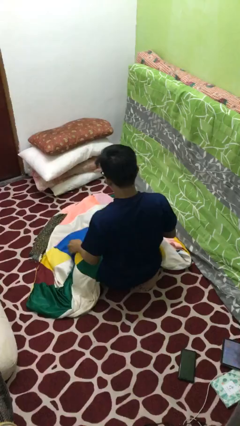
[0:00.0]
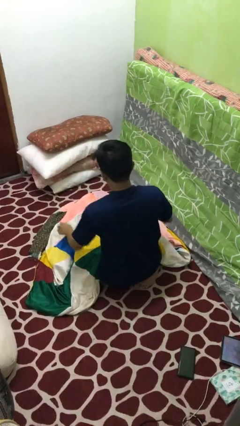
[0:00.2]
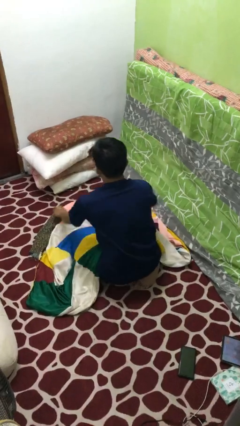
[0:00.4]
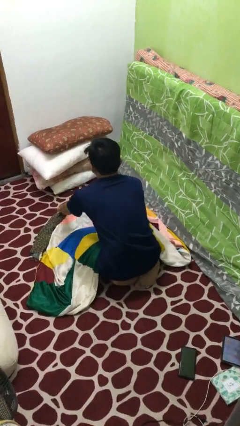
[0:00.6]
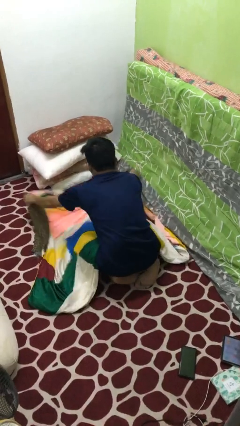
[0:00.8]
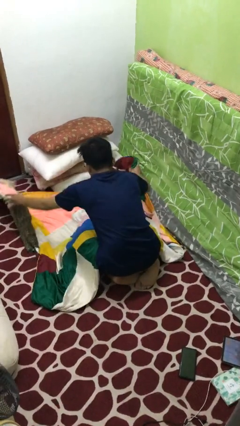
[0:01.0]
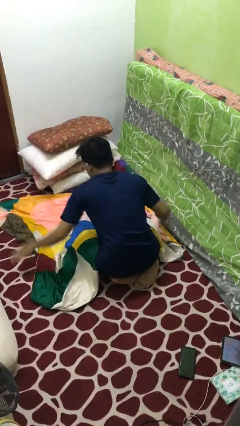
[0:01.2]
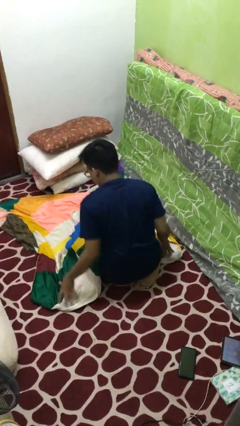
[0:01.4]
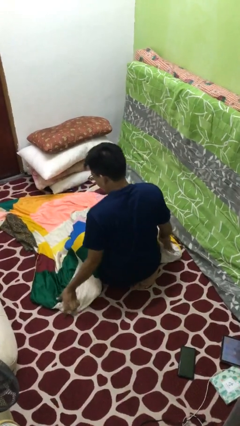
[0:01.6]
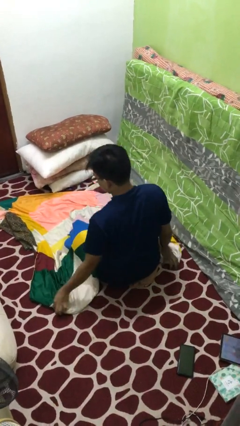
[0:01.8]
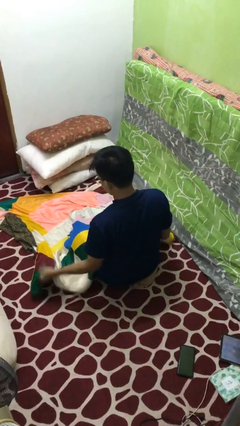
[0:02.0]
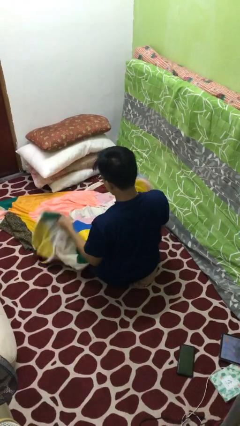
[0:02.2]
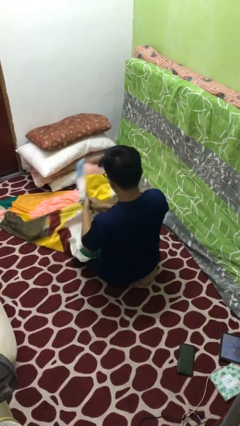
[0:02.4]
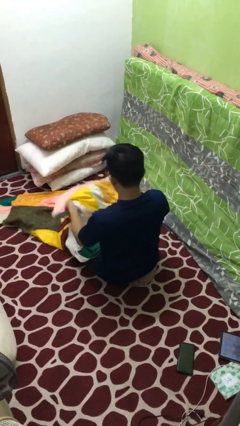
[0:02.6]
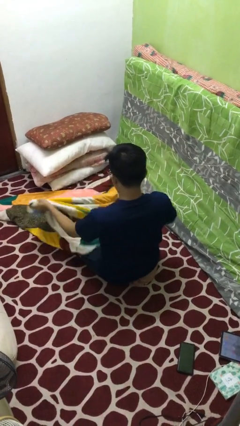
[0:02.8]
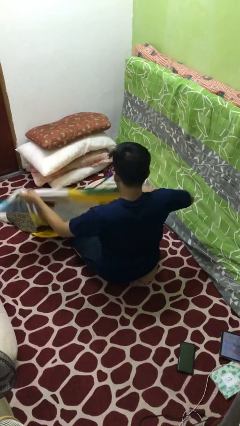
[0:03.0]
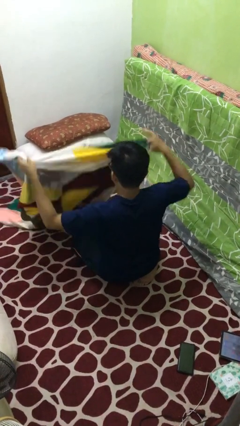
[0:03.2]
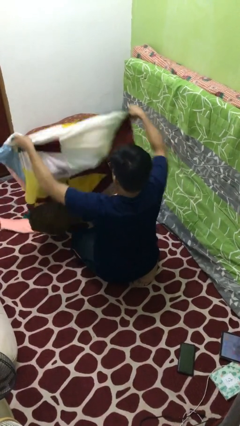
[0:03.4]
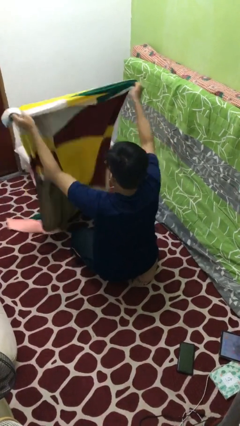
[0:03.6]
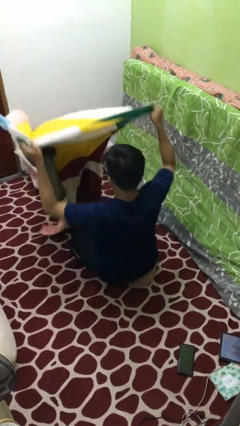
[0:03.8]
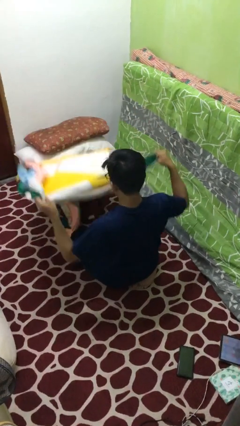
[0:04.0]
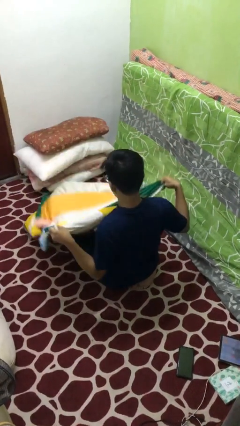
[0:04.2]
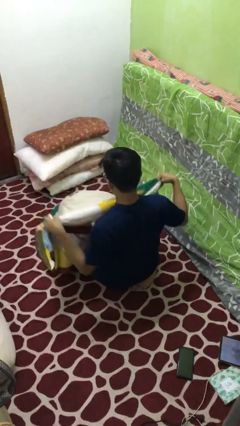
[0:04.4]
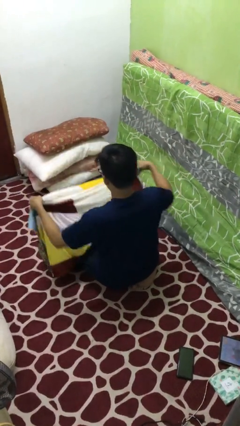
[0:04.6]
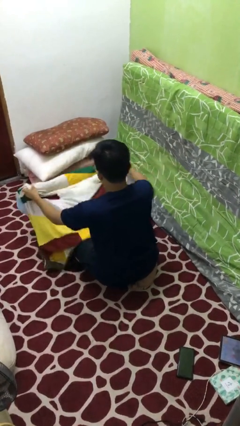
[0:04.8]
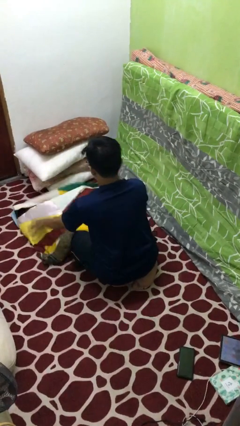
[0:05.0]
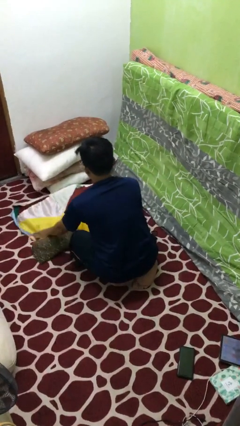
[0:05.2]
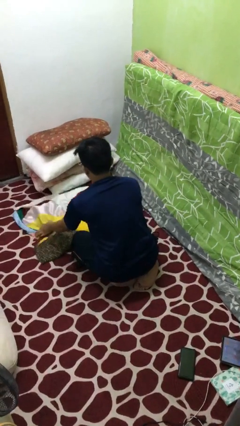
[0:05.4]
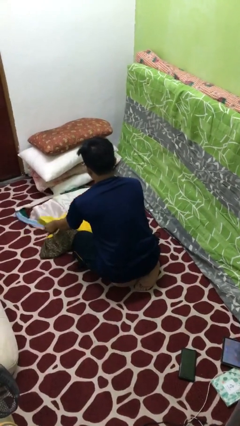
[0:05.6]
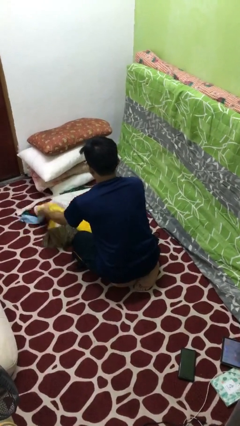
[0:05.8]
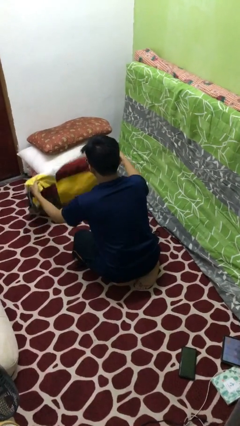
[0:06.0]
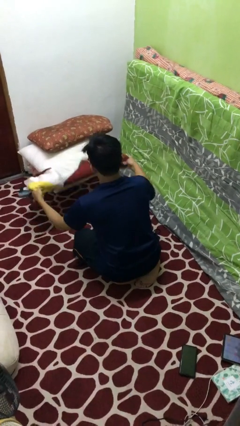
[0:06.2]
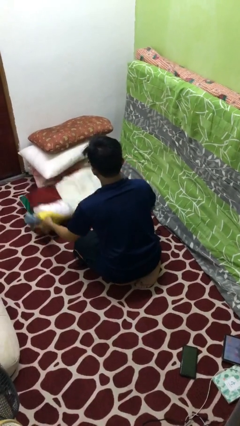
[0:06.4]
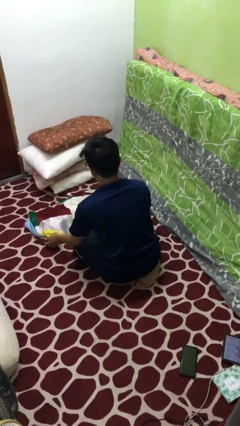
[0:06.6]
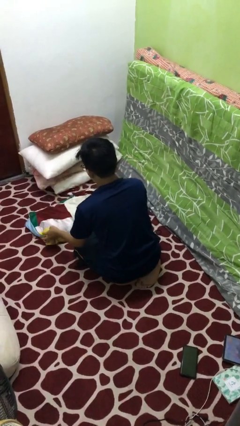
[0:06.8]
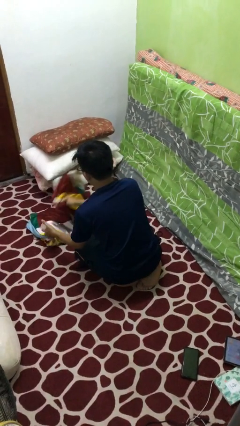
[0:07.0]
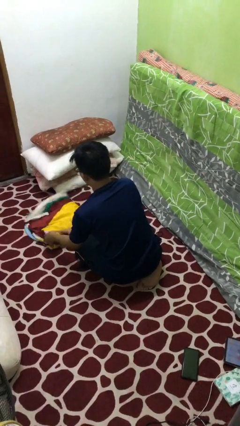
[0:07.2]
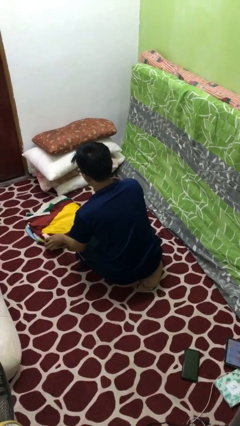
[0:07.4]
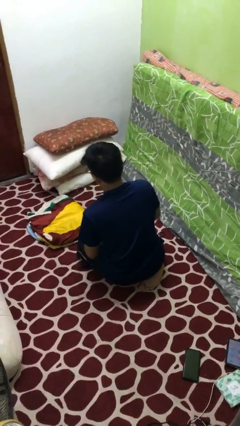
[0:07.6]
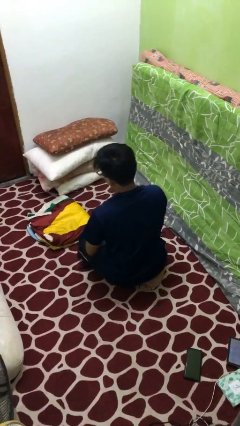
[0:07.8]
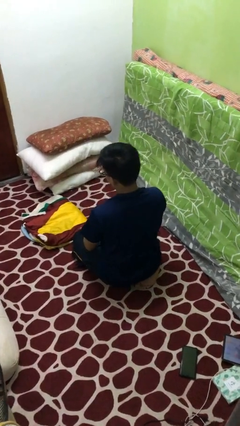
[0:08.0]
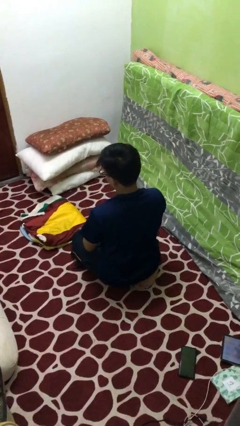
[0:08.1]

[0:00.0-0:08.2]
person folds blanket

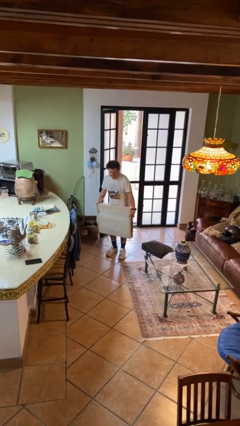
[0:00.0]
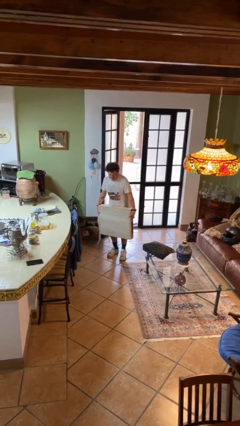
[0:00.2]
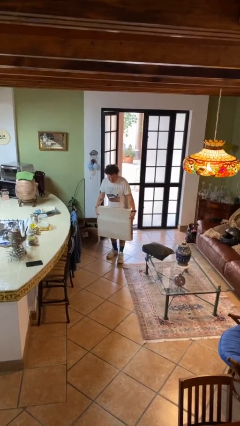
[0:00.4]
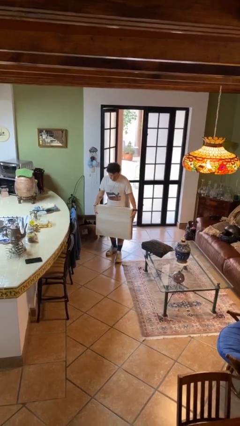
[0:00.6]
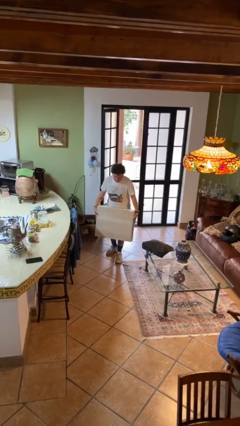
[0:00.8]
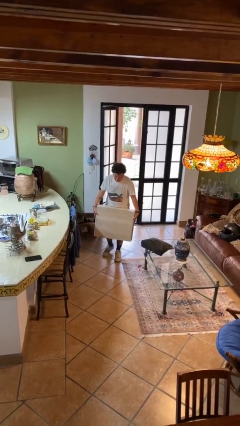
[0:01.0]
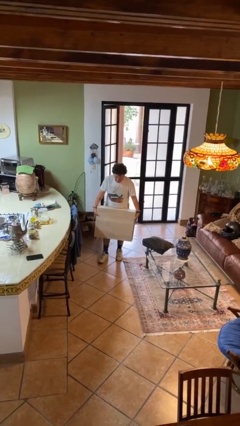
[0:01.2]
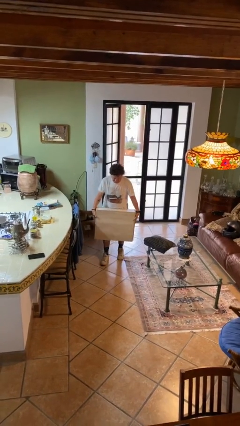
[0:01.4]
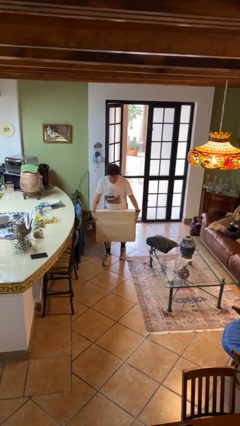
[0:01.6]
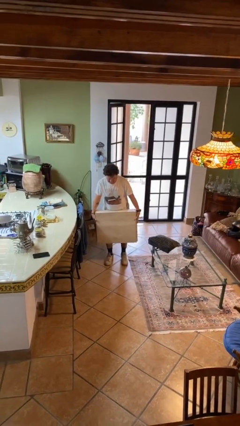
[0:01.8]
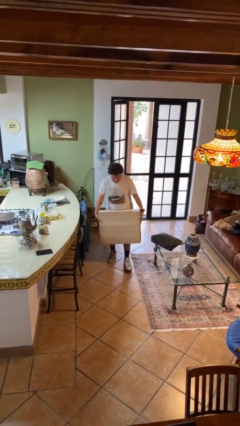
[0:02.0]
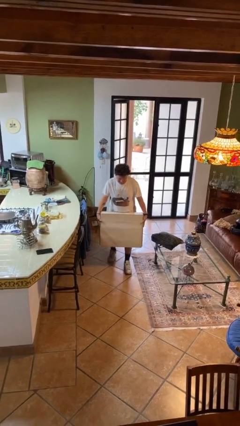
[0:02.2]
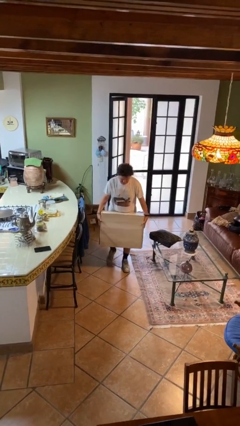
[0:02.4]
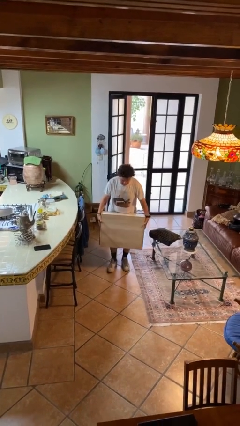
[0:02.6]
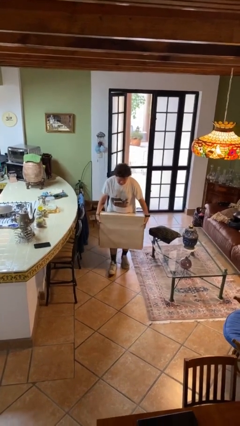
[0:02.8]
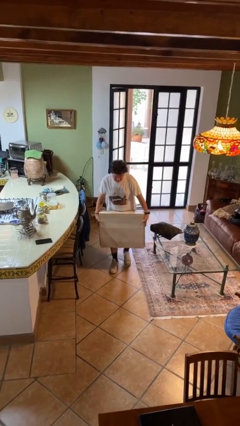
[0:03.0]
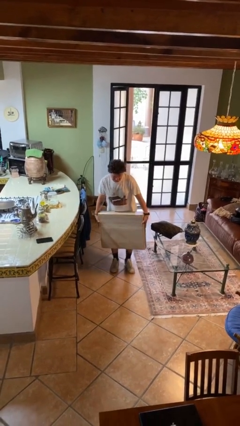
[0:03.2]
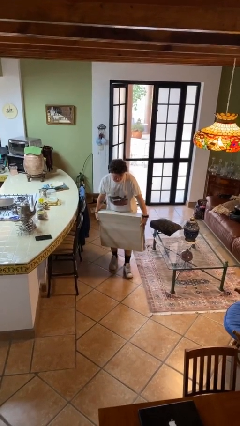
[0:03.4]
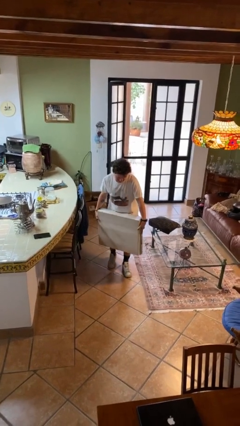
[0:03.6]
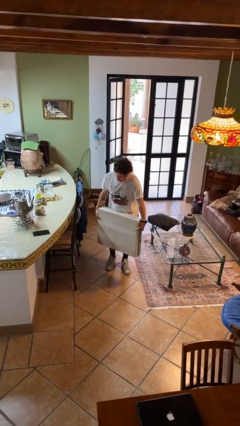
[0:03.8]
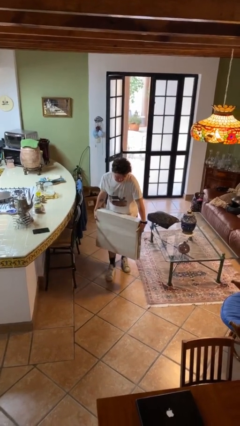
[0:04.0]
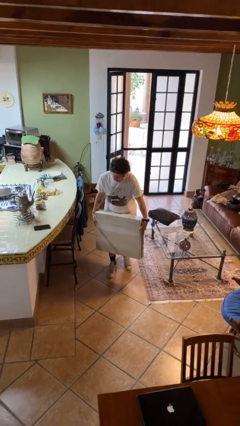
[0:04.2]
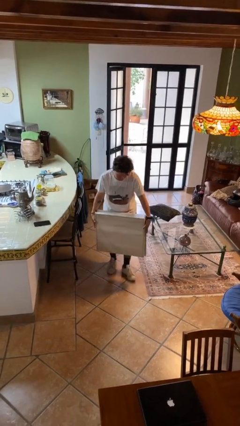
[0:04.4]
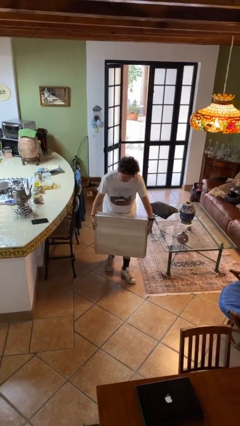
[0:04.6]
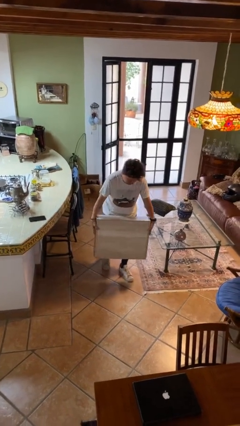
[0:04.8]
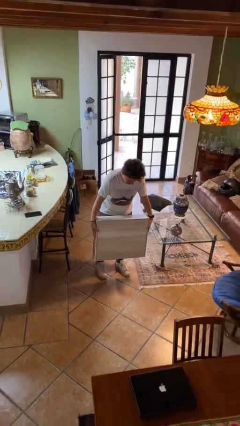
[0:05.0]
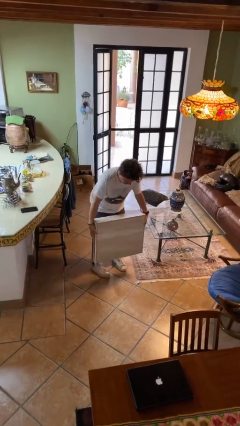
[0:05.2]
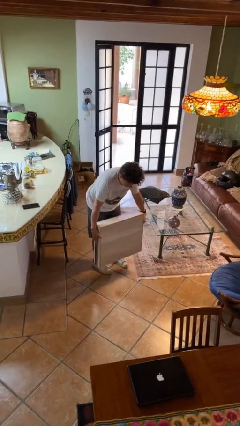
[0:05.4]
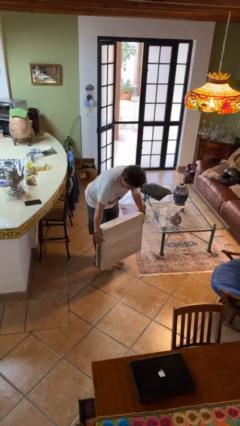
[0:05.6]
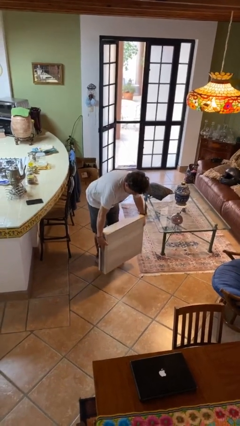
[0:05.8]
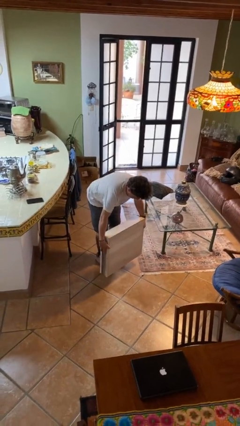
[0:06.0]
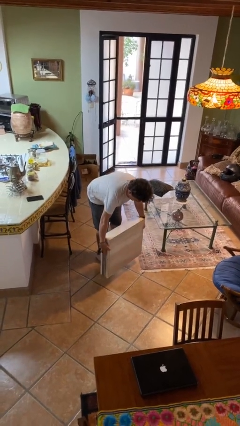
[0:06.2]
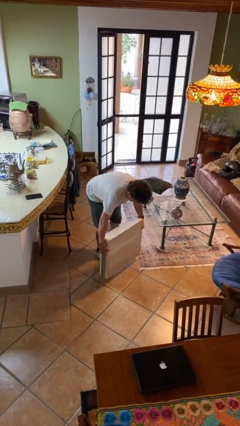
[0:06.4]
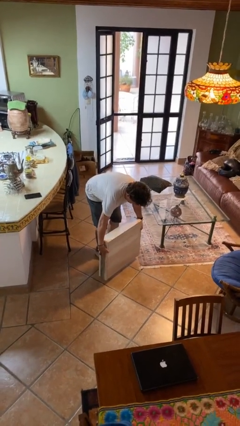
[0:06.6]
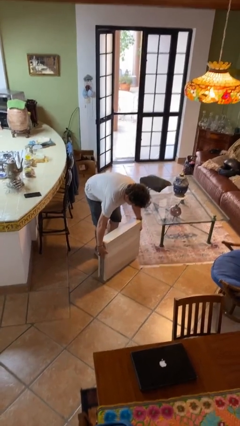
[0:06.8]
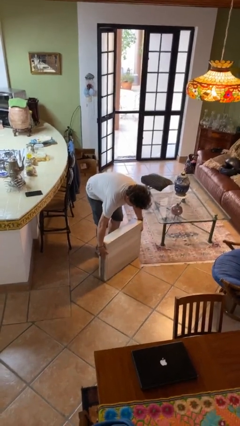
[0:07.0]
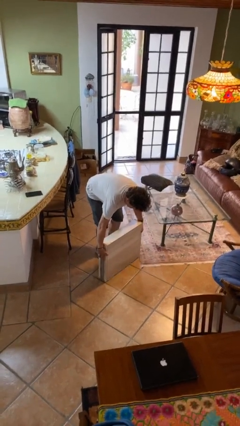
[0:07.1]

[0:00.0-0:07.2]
person carries heavy object

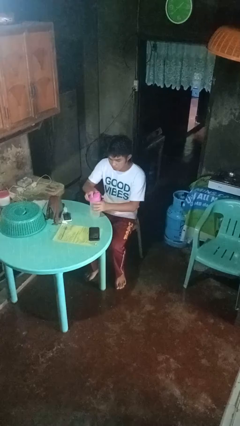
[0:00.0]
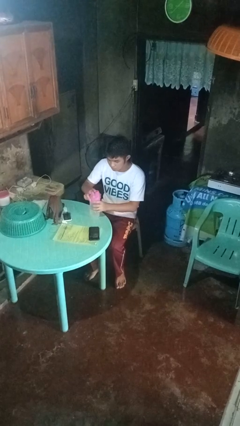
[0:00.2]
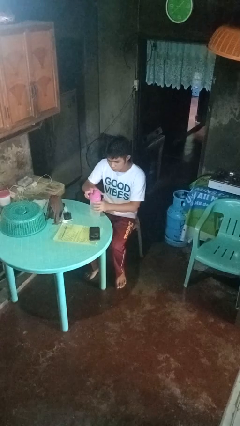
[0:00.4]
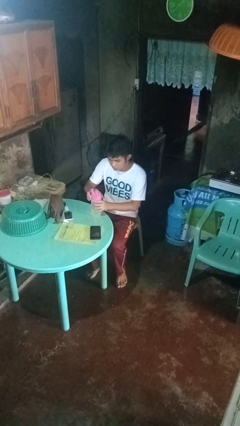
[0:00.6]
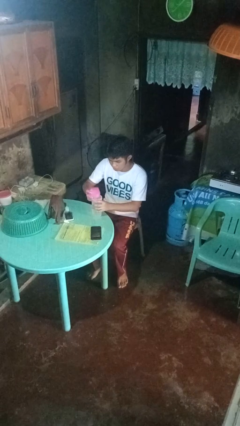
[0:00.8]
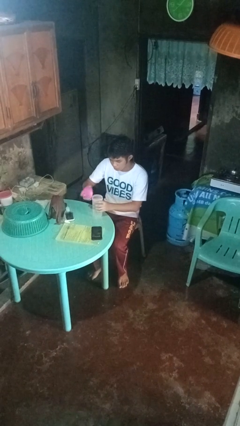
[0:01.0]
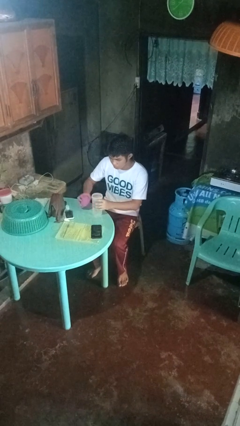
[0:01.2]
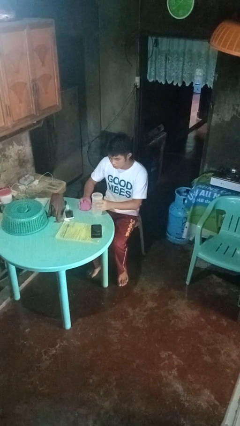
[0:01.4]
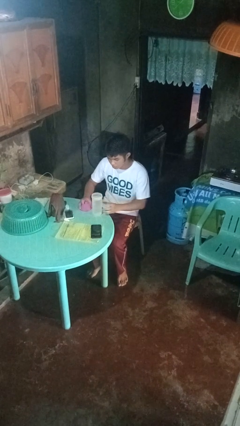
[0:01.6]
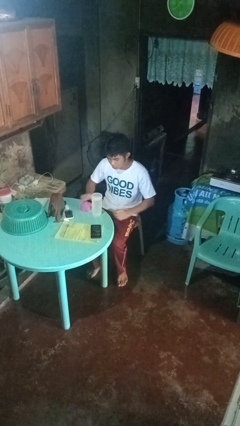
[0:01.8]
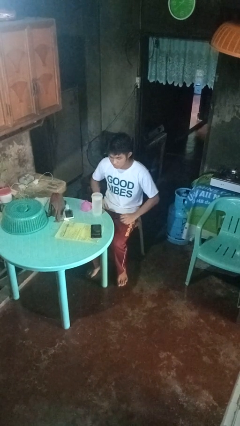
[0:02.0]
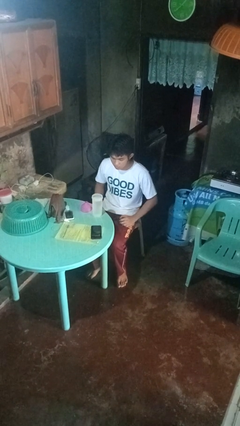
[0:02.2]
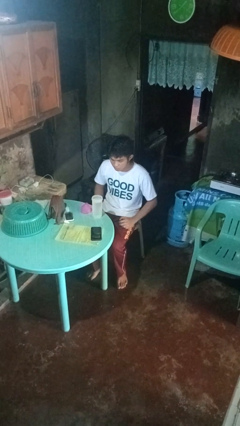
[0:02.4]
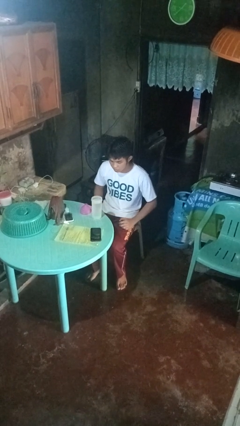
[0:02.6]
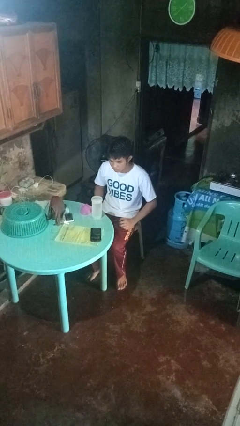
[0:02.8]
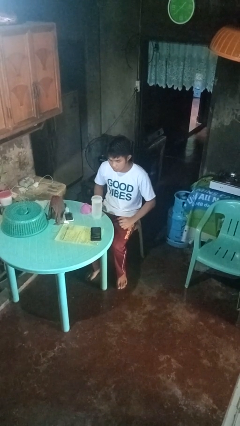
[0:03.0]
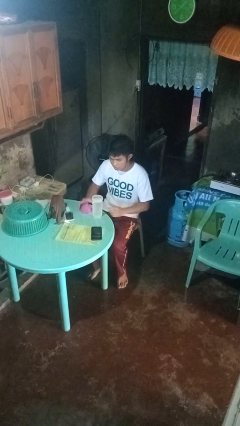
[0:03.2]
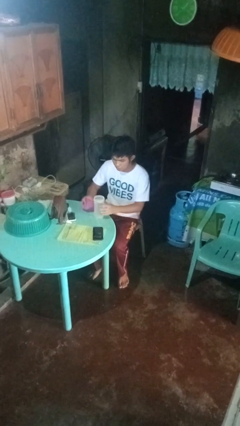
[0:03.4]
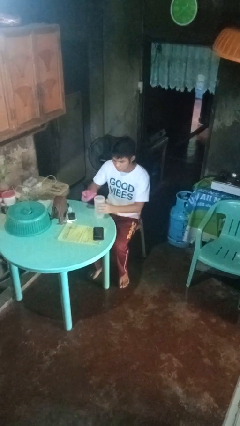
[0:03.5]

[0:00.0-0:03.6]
person unscrews lid from bottle
